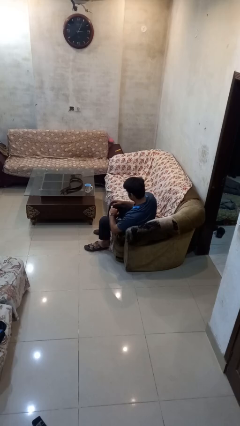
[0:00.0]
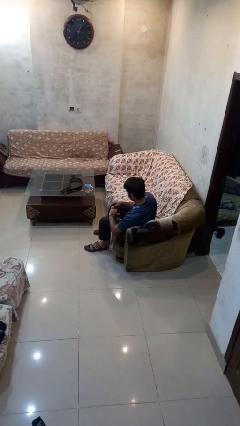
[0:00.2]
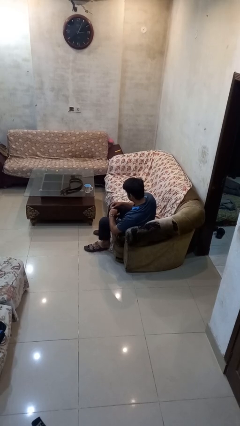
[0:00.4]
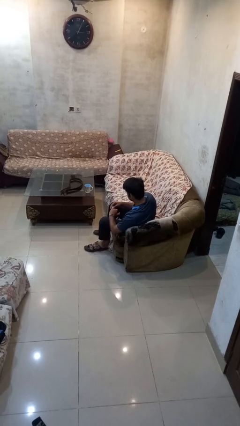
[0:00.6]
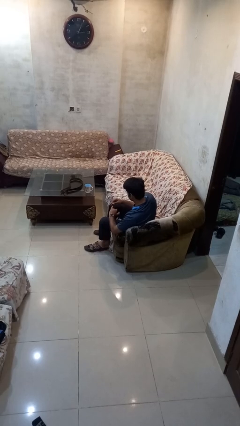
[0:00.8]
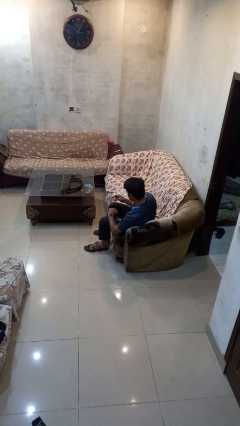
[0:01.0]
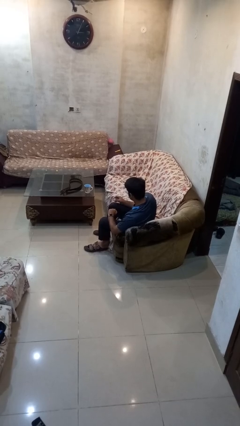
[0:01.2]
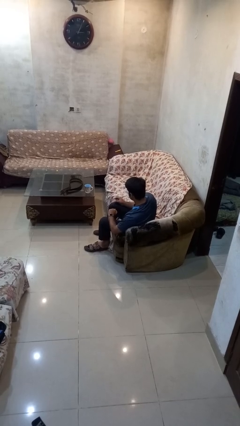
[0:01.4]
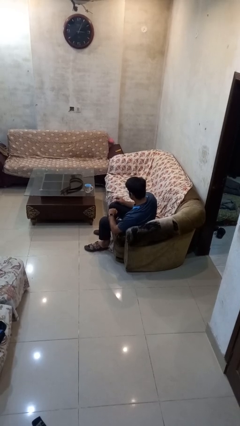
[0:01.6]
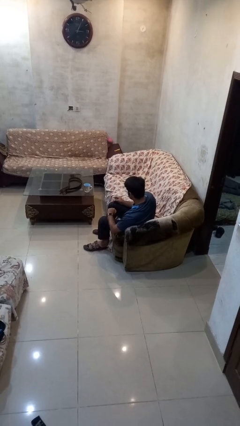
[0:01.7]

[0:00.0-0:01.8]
person takes off ring

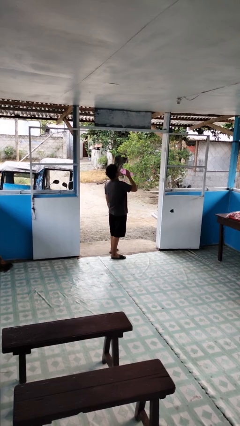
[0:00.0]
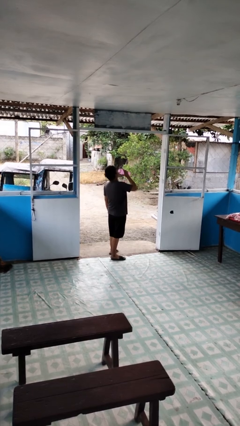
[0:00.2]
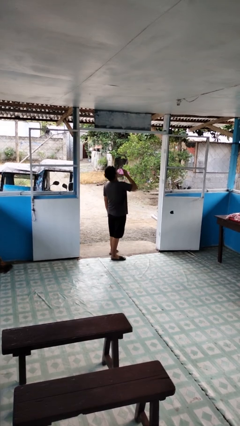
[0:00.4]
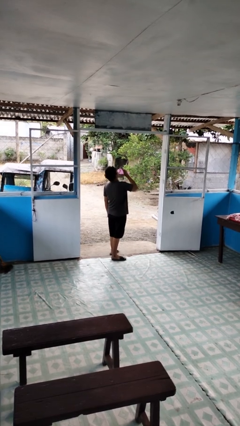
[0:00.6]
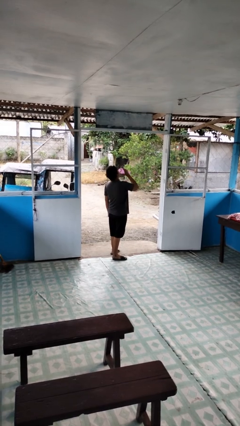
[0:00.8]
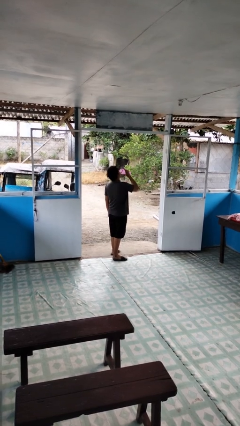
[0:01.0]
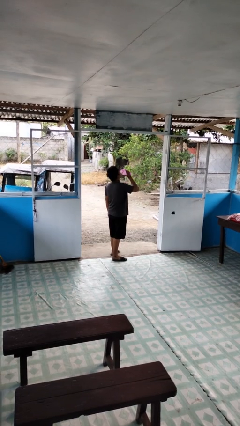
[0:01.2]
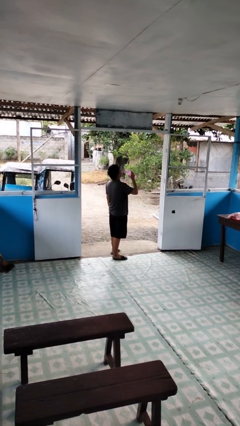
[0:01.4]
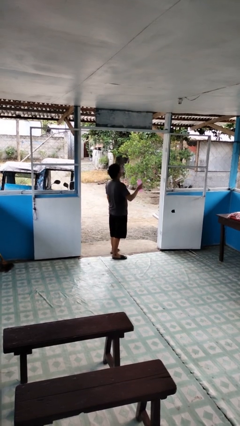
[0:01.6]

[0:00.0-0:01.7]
person drinks from bottle

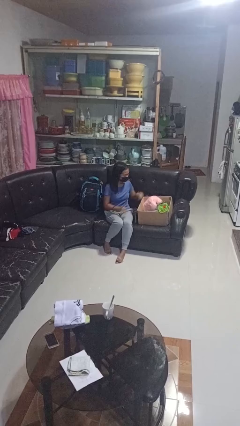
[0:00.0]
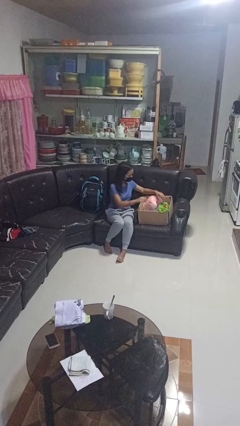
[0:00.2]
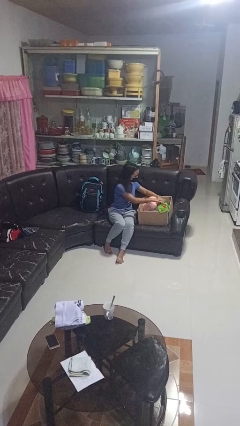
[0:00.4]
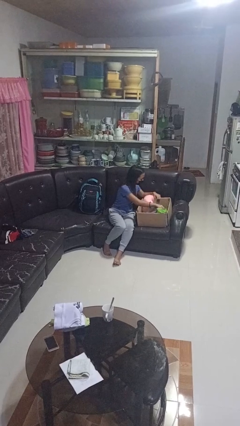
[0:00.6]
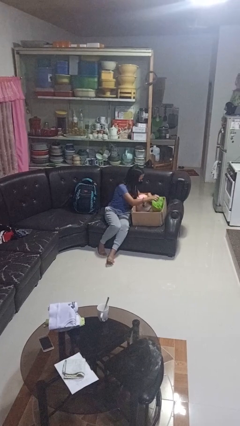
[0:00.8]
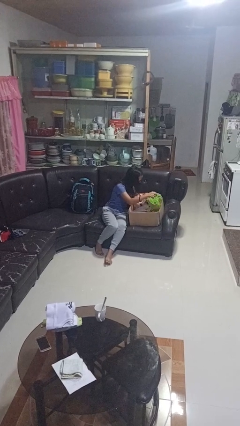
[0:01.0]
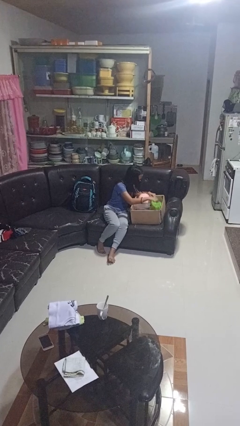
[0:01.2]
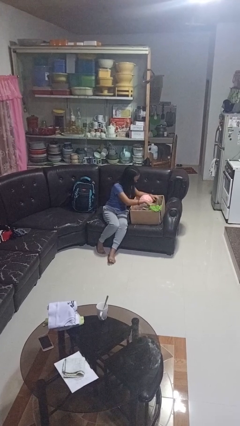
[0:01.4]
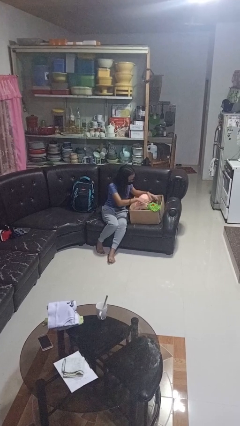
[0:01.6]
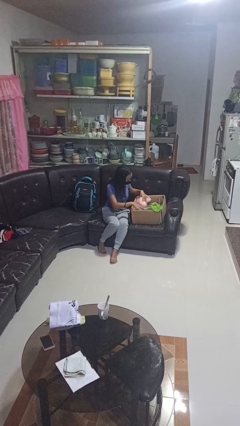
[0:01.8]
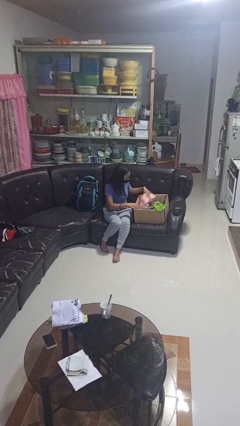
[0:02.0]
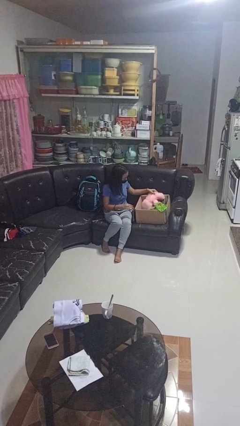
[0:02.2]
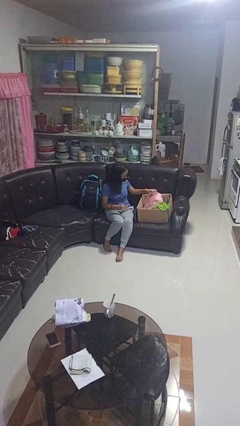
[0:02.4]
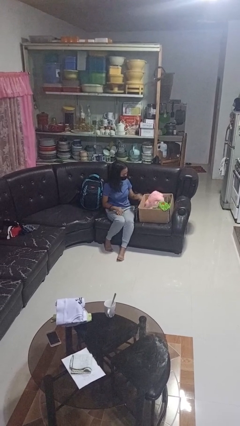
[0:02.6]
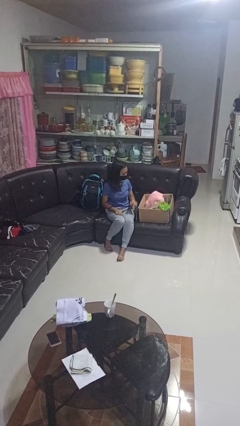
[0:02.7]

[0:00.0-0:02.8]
person searches in box

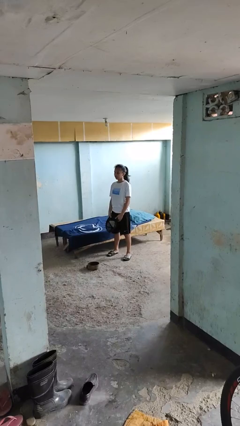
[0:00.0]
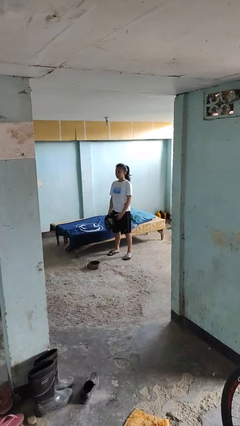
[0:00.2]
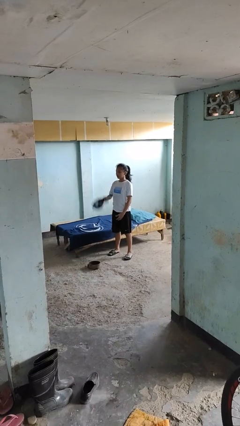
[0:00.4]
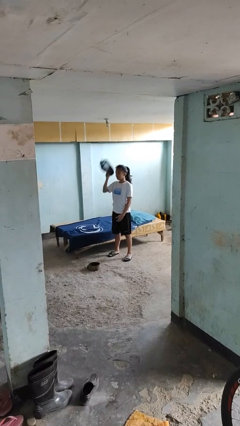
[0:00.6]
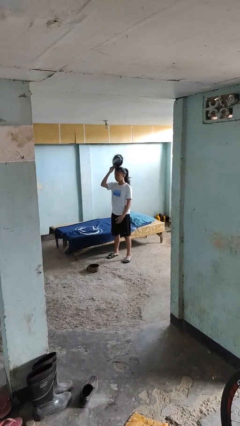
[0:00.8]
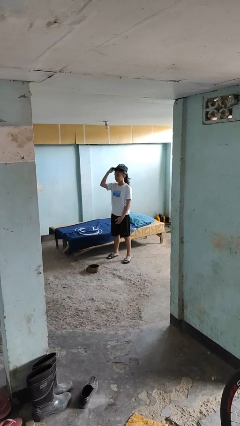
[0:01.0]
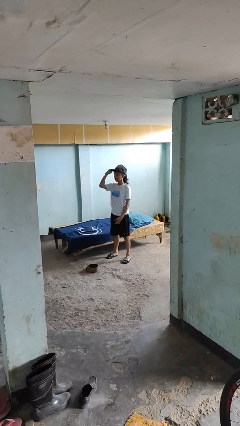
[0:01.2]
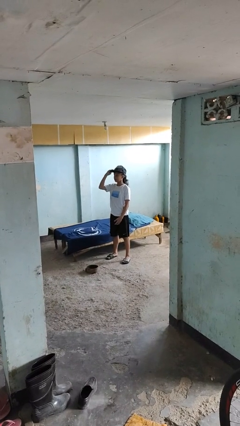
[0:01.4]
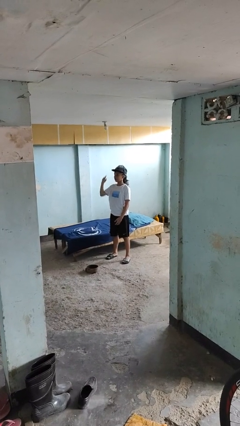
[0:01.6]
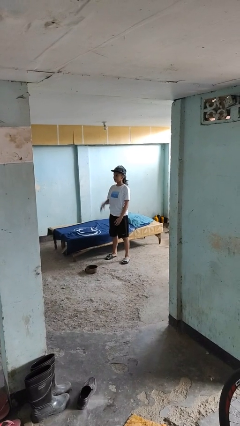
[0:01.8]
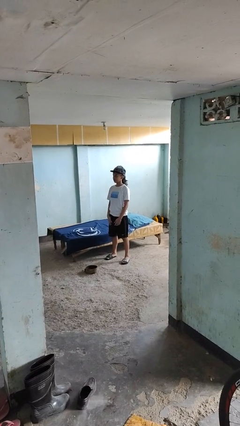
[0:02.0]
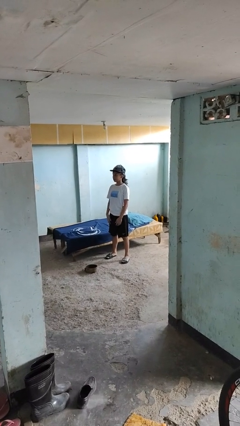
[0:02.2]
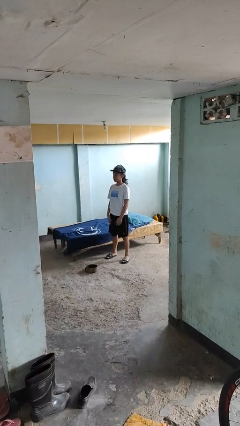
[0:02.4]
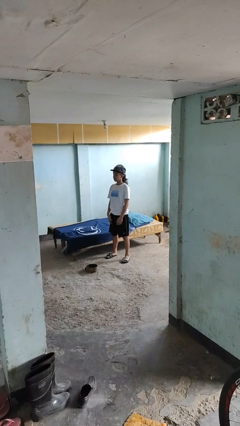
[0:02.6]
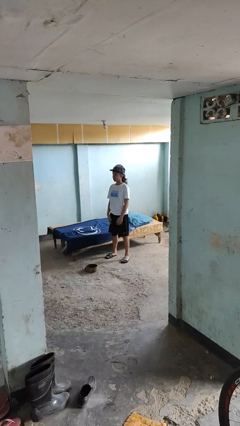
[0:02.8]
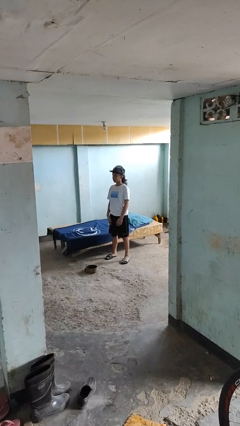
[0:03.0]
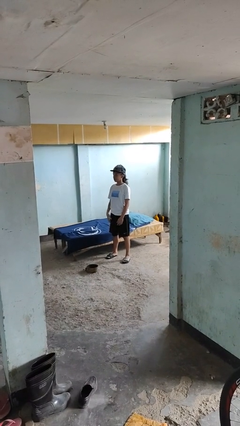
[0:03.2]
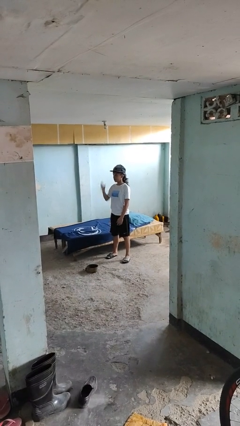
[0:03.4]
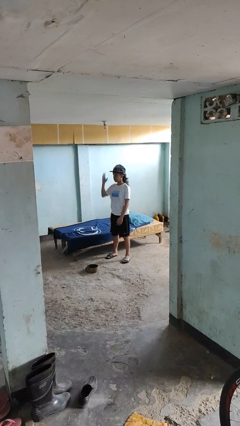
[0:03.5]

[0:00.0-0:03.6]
person puts on hat

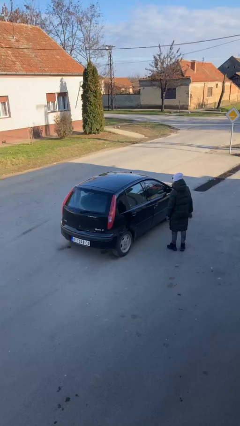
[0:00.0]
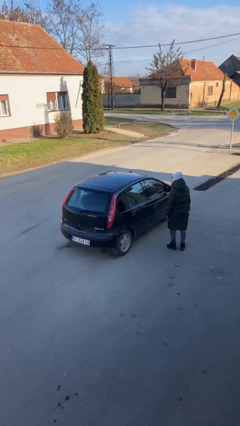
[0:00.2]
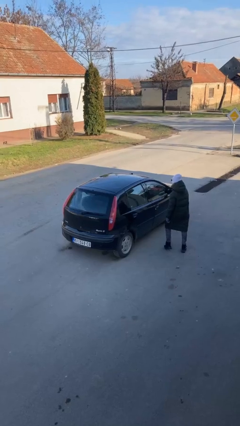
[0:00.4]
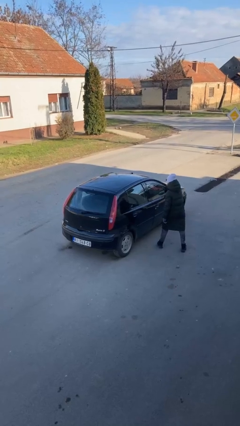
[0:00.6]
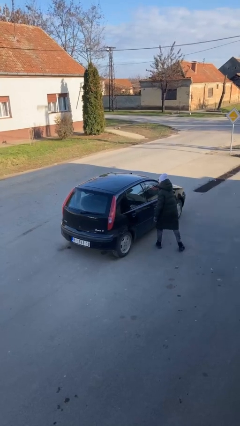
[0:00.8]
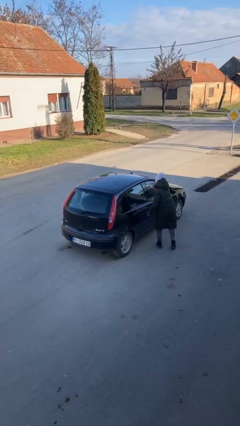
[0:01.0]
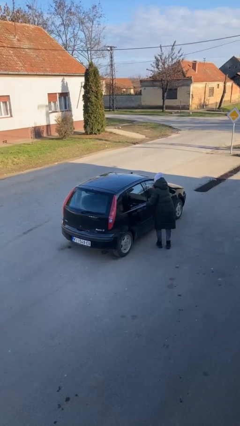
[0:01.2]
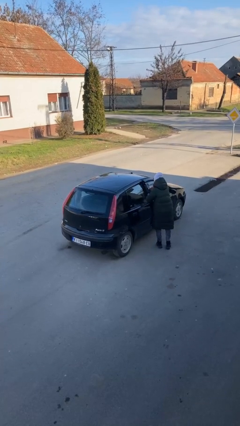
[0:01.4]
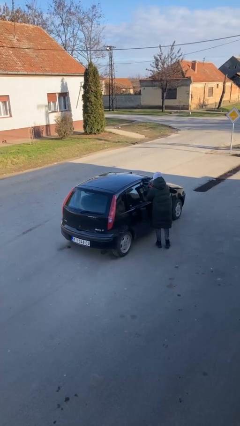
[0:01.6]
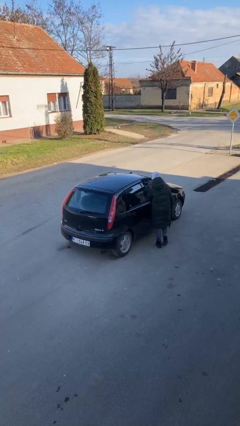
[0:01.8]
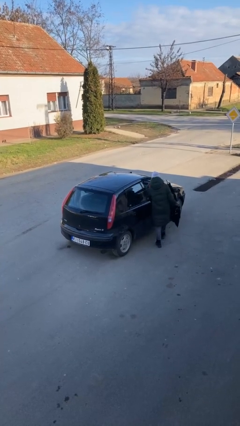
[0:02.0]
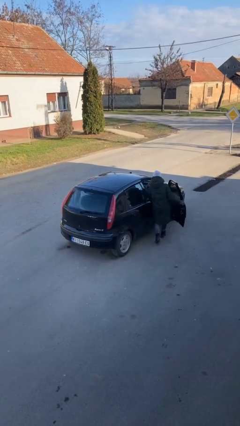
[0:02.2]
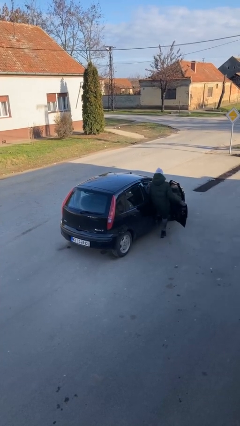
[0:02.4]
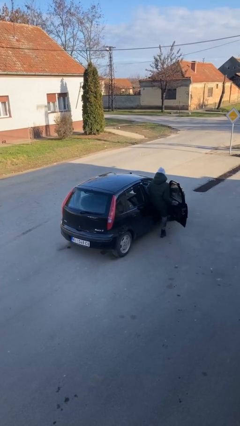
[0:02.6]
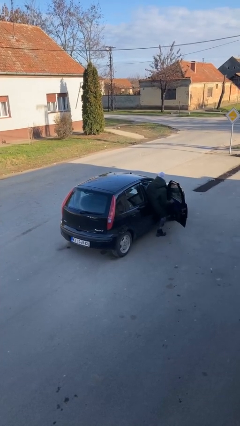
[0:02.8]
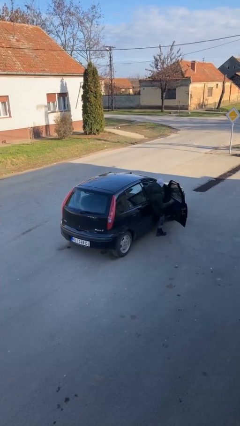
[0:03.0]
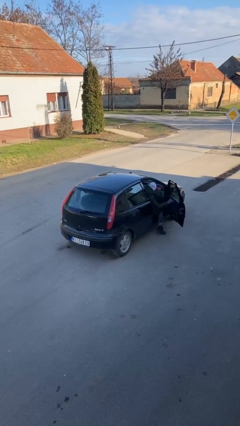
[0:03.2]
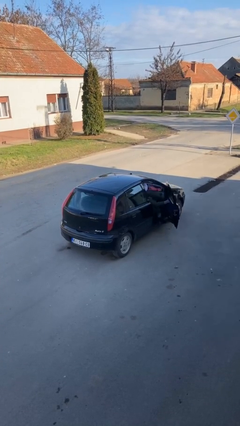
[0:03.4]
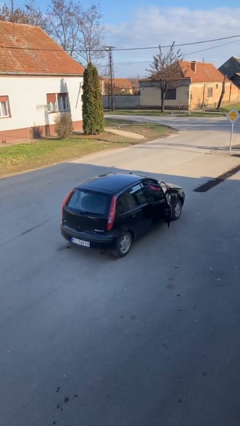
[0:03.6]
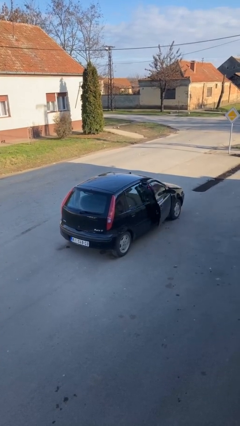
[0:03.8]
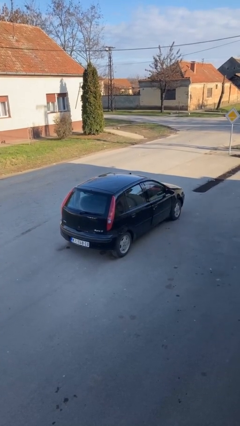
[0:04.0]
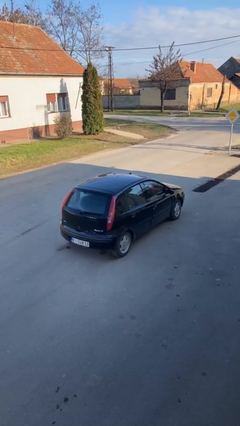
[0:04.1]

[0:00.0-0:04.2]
car picks up person

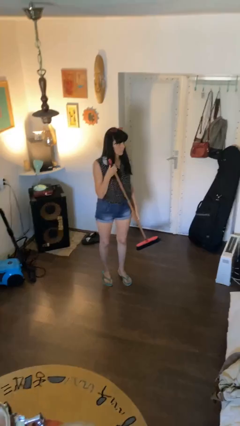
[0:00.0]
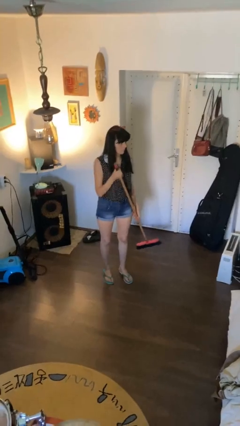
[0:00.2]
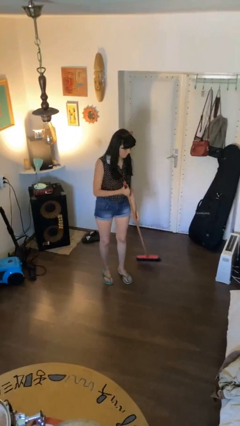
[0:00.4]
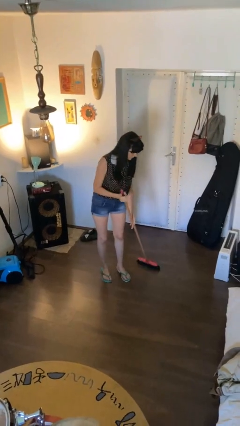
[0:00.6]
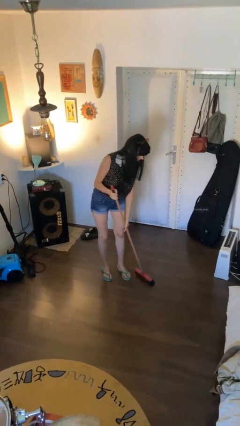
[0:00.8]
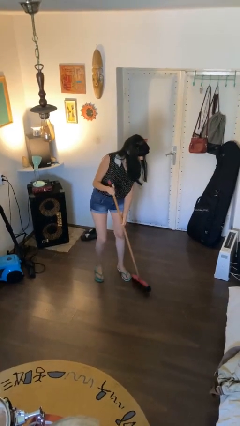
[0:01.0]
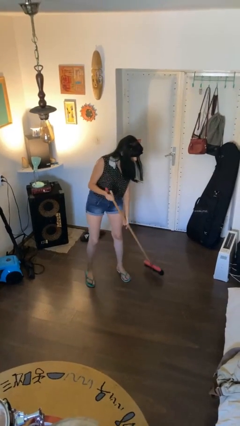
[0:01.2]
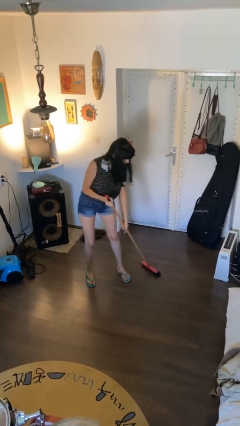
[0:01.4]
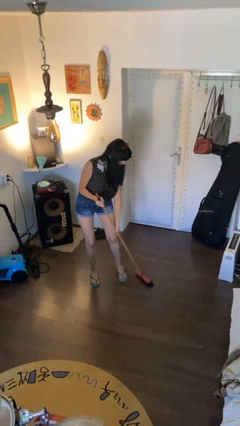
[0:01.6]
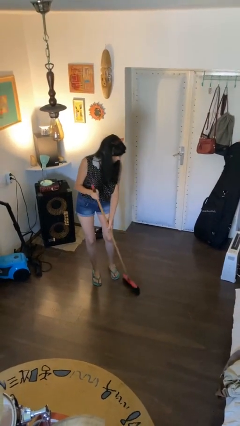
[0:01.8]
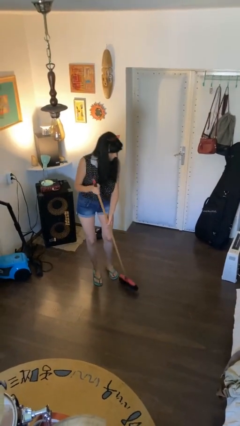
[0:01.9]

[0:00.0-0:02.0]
person sweeps floor

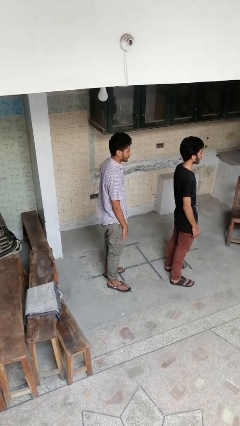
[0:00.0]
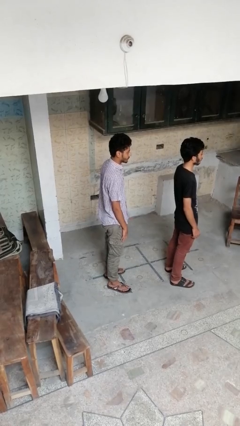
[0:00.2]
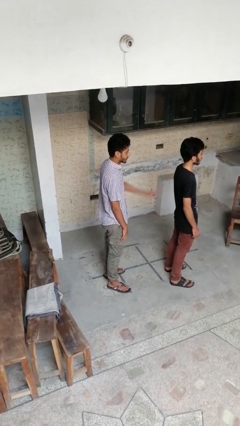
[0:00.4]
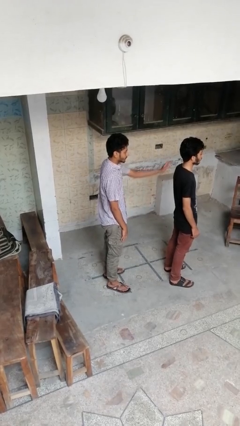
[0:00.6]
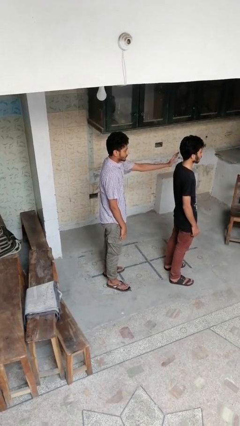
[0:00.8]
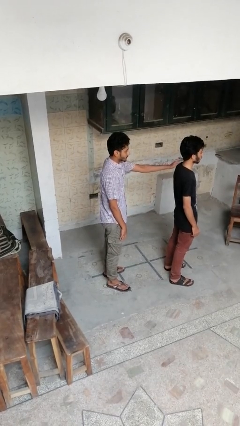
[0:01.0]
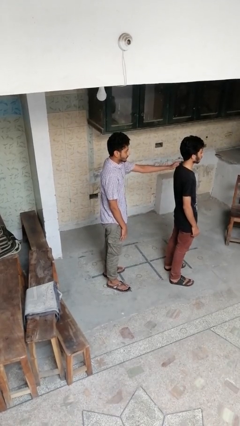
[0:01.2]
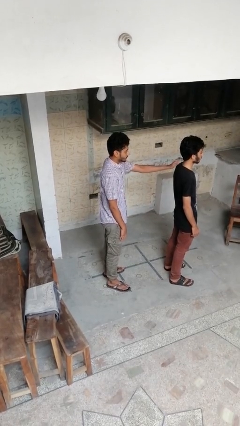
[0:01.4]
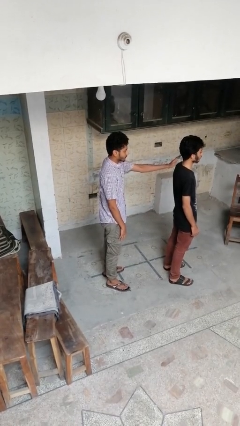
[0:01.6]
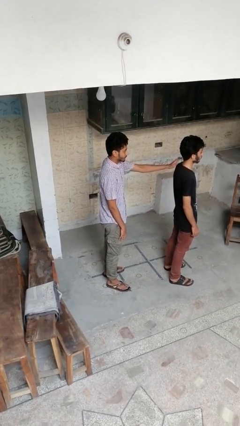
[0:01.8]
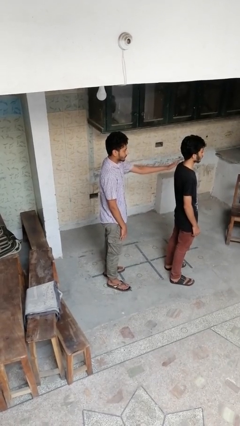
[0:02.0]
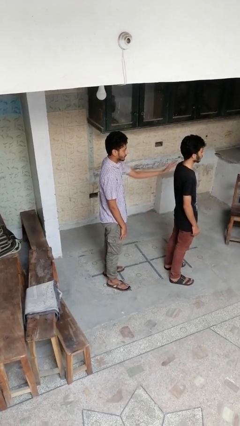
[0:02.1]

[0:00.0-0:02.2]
person touches back of person
